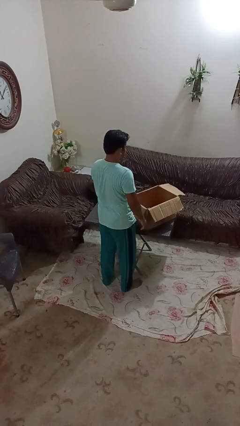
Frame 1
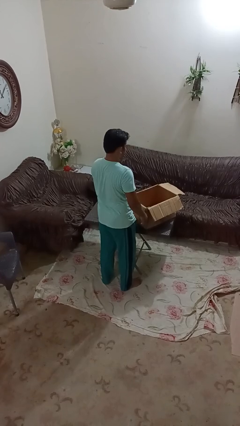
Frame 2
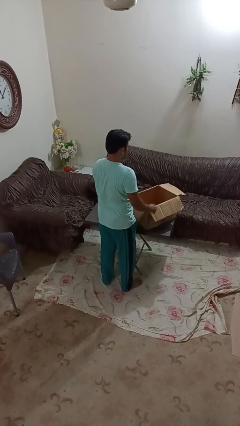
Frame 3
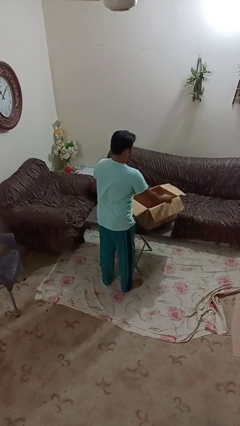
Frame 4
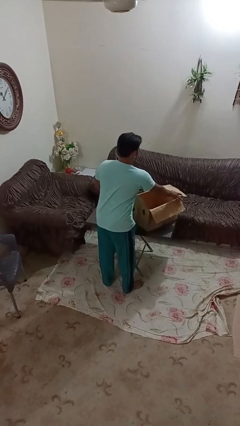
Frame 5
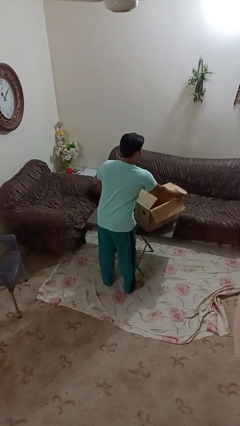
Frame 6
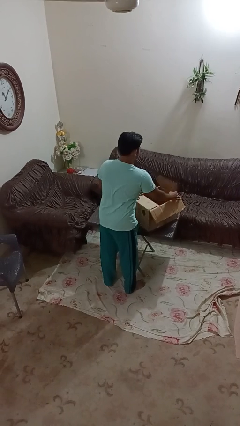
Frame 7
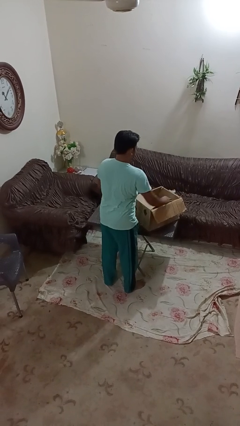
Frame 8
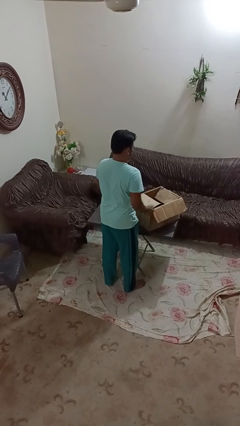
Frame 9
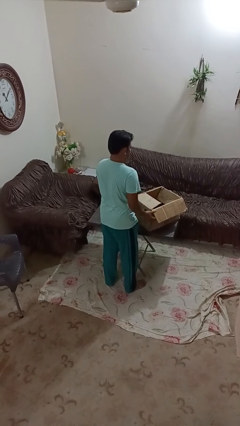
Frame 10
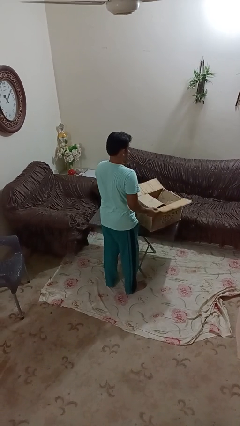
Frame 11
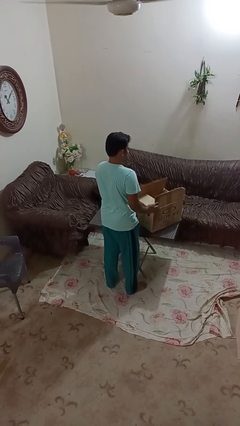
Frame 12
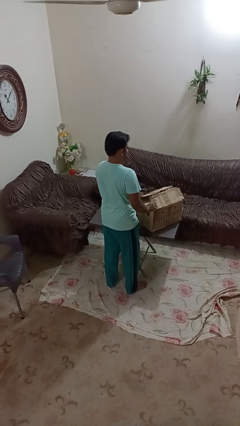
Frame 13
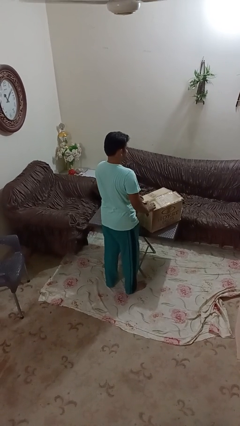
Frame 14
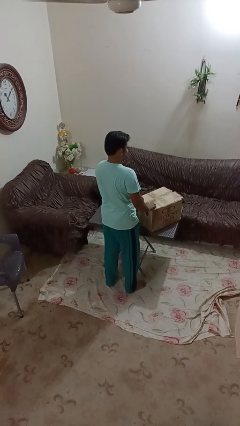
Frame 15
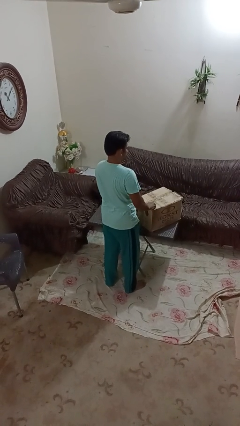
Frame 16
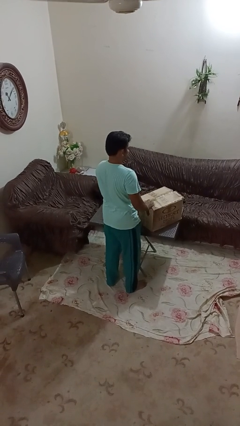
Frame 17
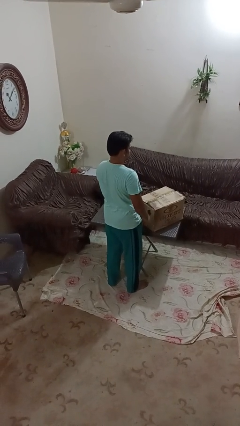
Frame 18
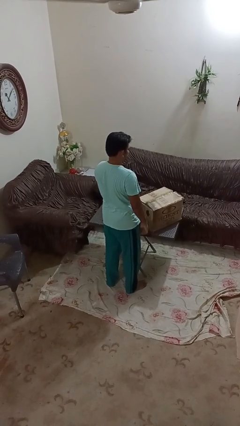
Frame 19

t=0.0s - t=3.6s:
person closes box

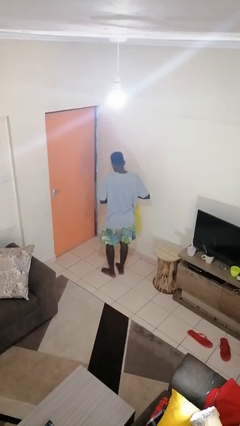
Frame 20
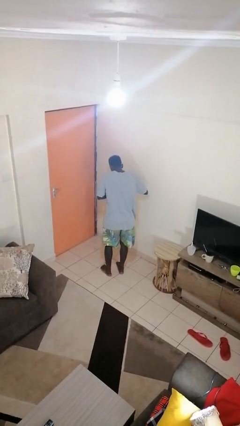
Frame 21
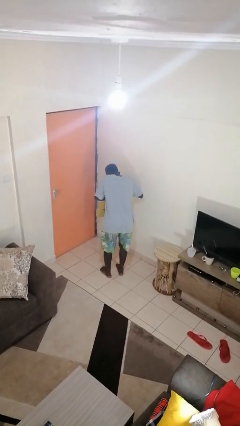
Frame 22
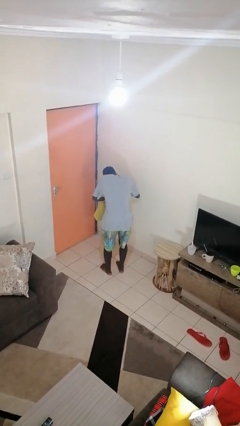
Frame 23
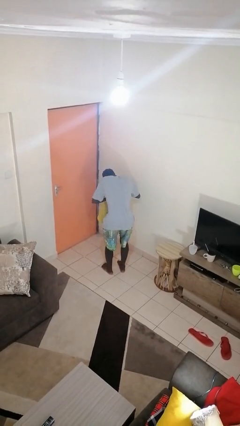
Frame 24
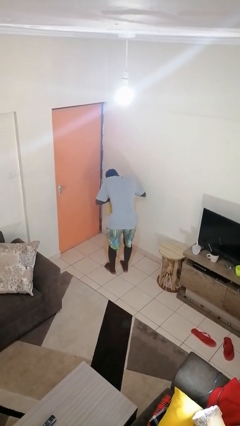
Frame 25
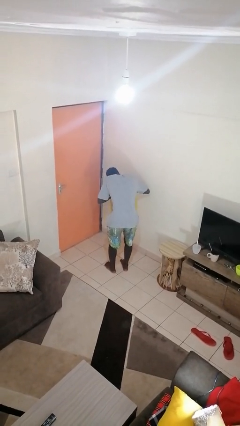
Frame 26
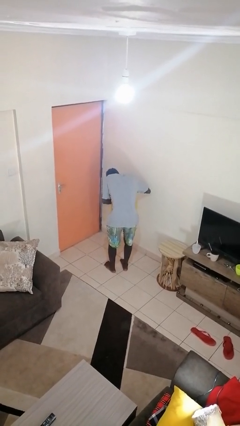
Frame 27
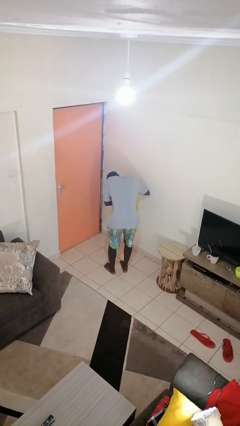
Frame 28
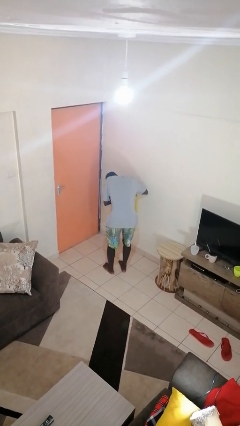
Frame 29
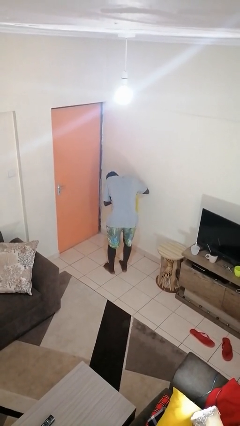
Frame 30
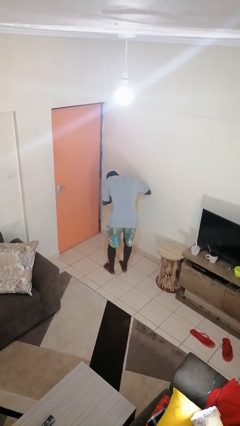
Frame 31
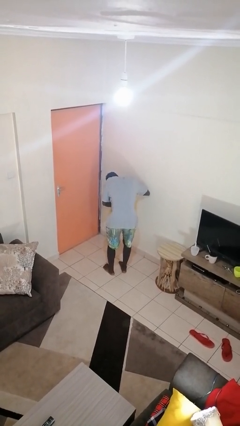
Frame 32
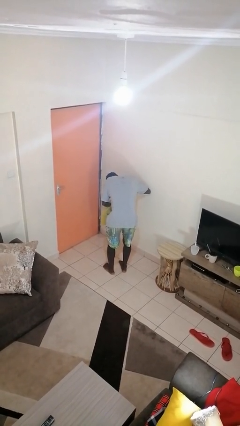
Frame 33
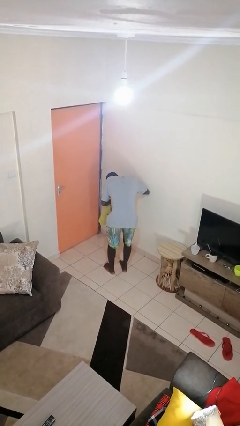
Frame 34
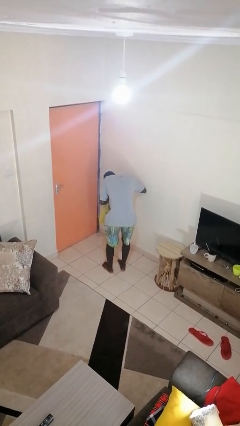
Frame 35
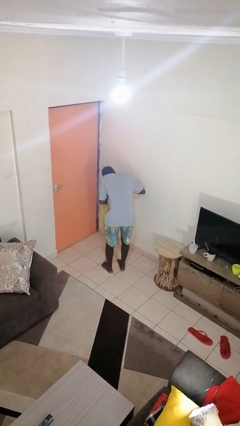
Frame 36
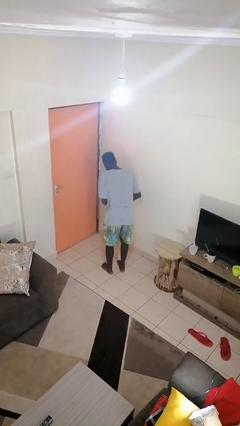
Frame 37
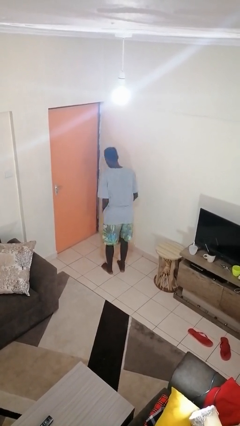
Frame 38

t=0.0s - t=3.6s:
person searches in bag

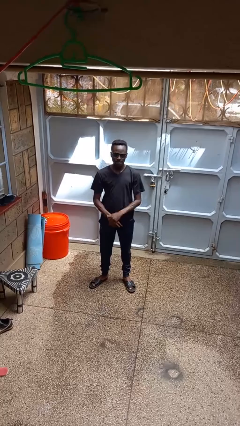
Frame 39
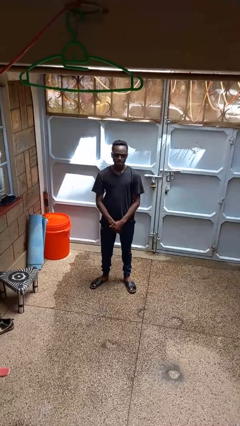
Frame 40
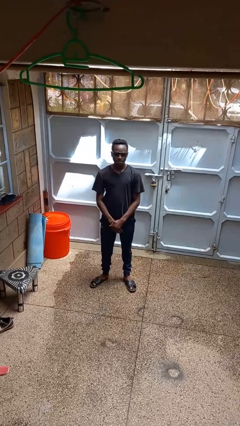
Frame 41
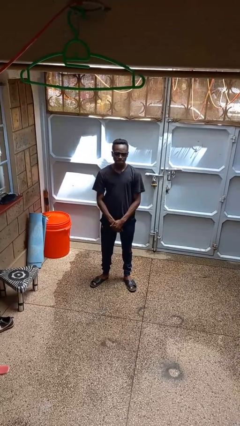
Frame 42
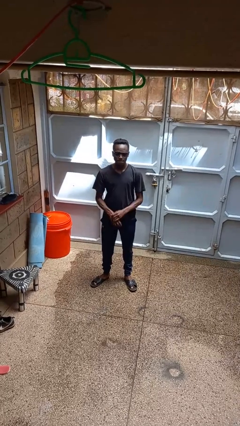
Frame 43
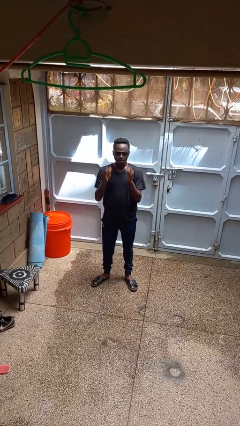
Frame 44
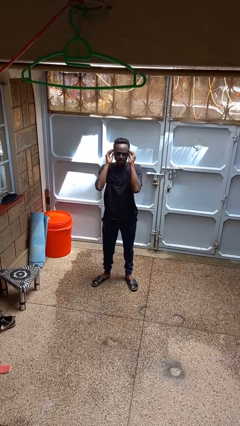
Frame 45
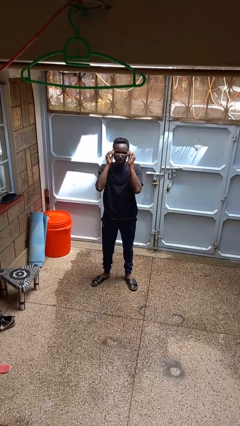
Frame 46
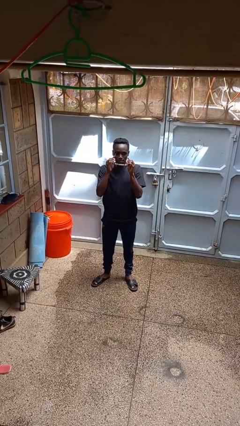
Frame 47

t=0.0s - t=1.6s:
person takes off sunglasses

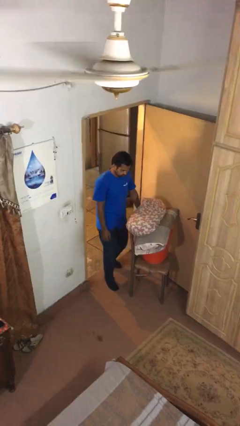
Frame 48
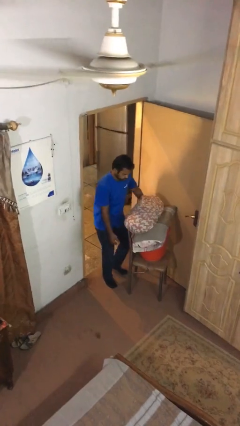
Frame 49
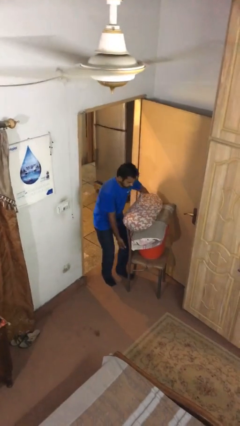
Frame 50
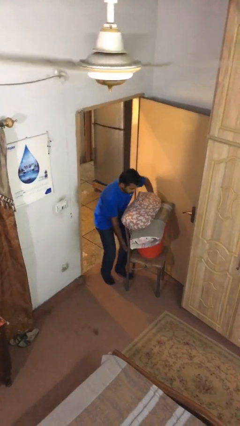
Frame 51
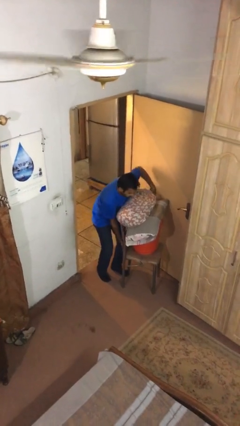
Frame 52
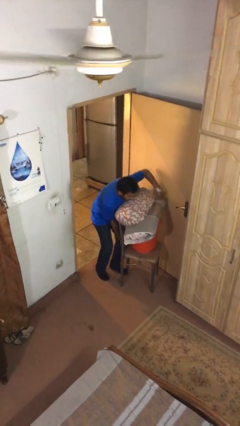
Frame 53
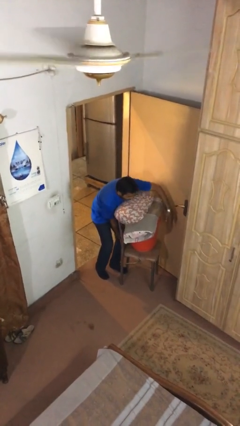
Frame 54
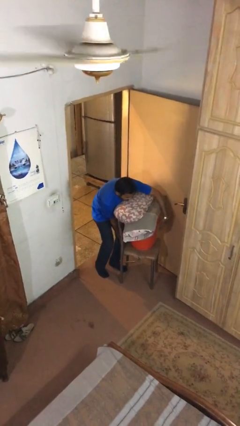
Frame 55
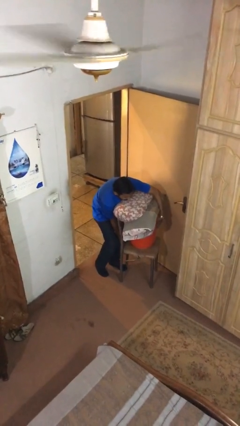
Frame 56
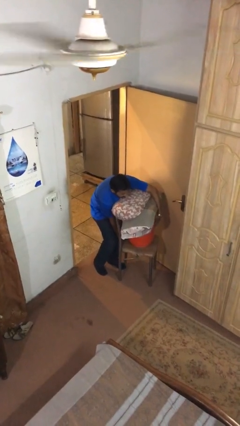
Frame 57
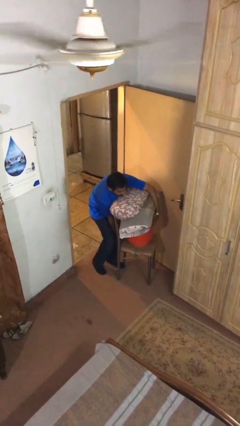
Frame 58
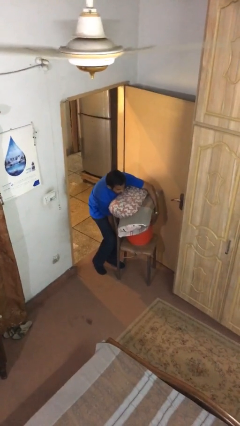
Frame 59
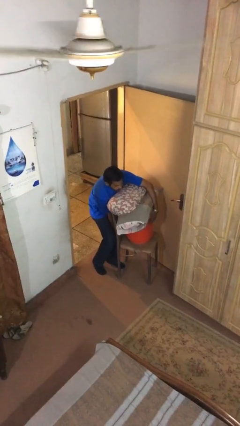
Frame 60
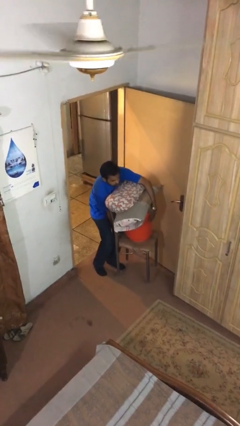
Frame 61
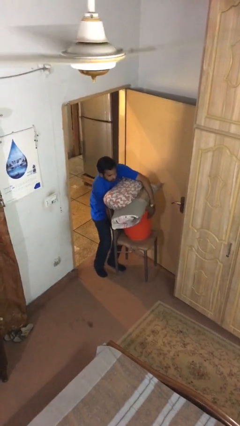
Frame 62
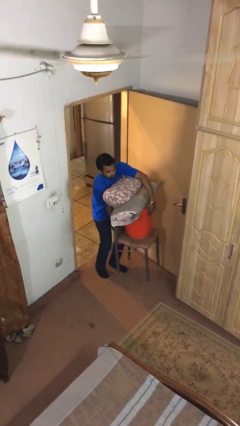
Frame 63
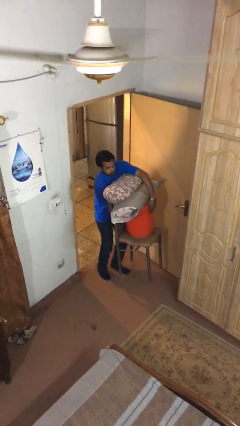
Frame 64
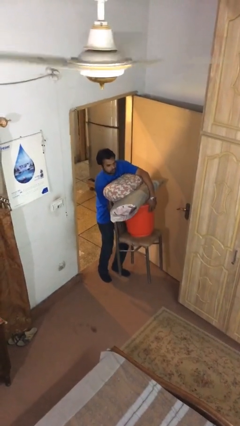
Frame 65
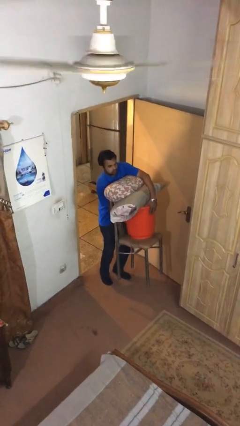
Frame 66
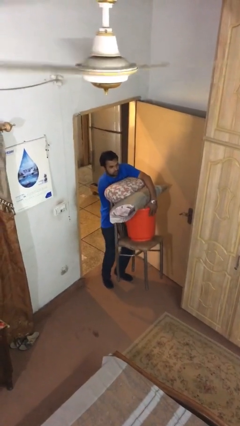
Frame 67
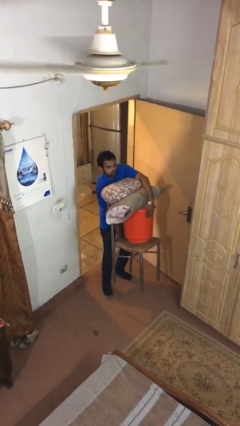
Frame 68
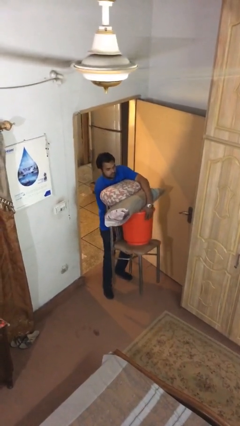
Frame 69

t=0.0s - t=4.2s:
person picks up object from floor

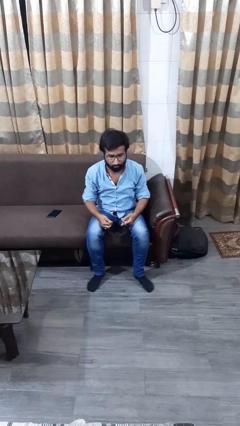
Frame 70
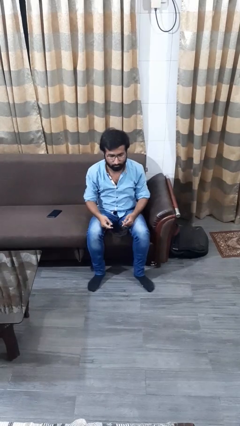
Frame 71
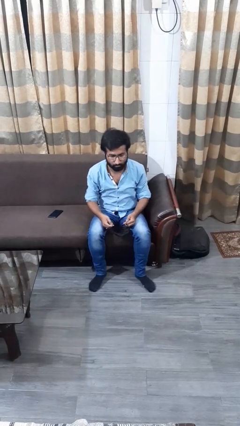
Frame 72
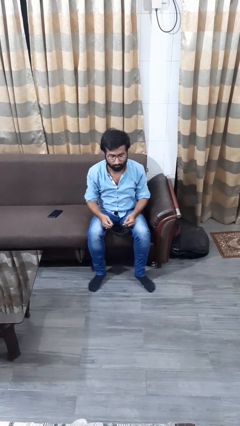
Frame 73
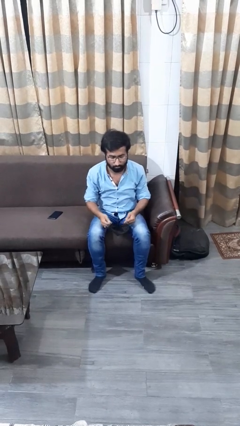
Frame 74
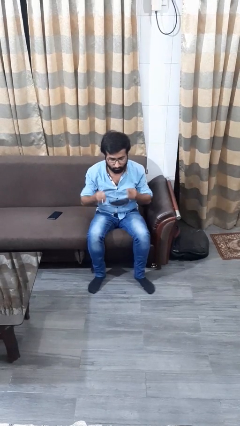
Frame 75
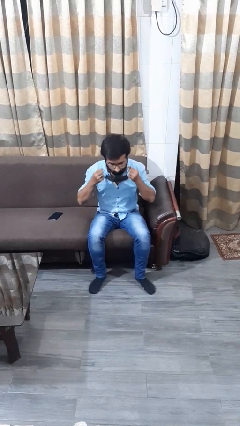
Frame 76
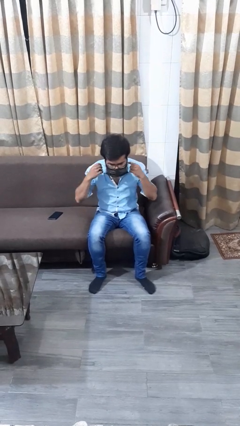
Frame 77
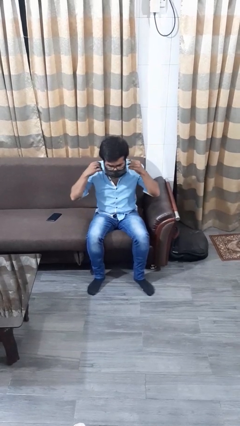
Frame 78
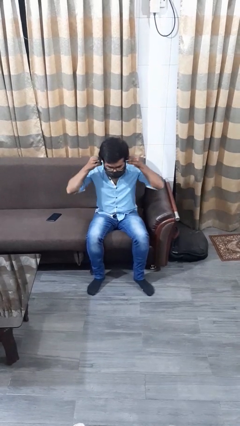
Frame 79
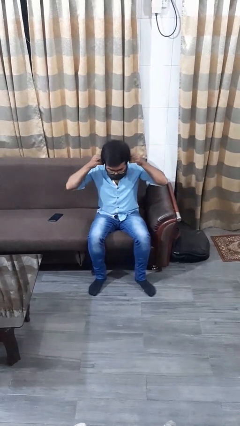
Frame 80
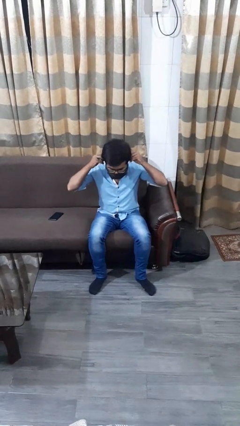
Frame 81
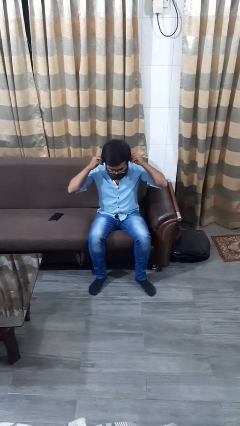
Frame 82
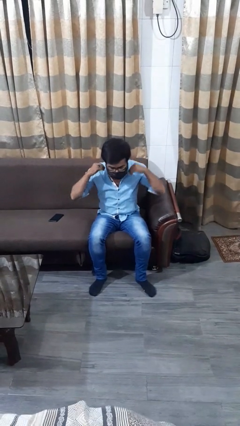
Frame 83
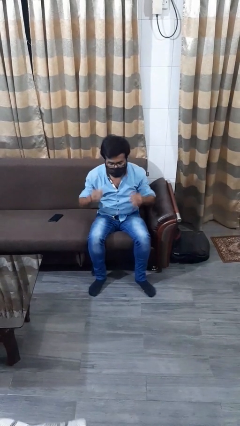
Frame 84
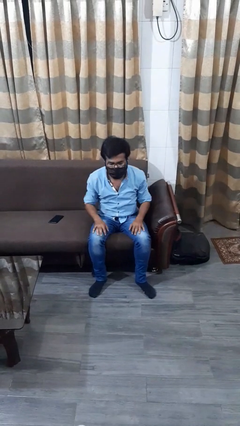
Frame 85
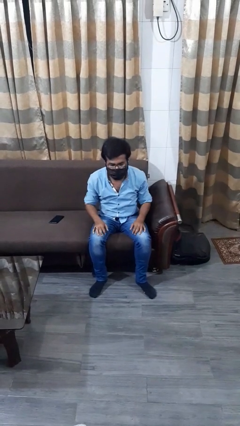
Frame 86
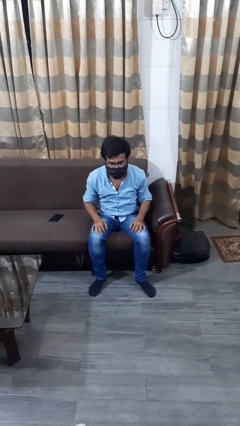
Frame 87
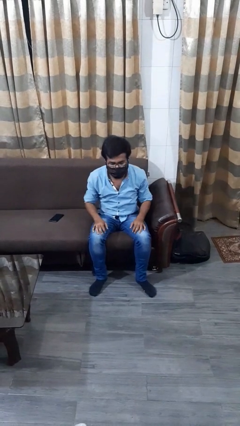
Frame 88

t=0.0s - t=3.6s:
person puts on facemask

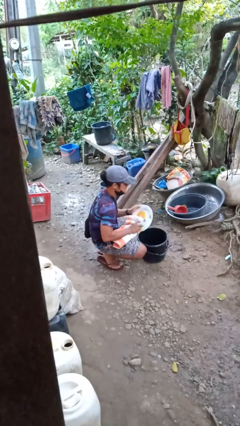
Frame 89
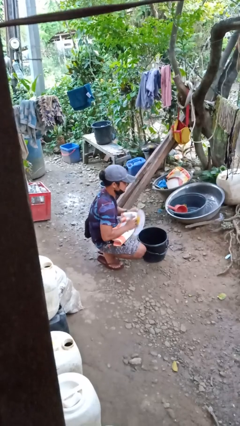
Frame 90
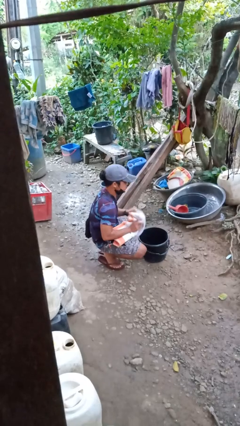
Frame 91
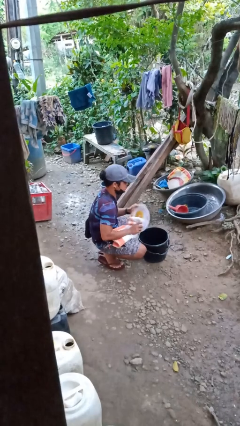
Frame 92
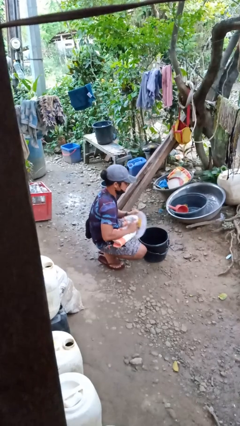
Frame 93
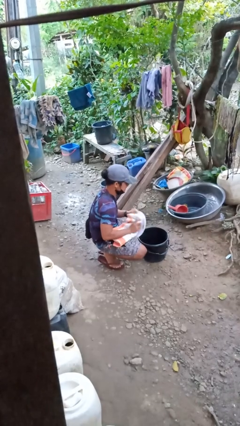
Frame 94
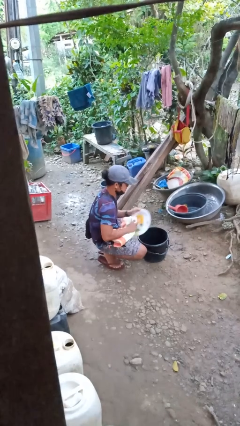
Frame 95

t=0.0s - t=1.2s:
person dries dish

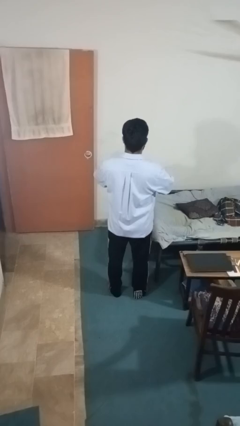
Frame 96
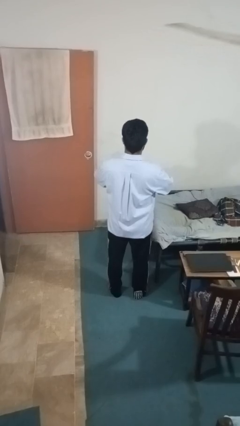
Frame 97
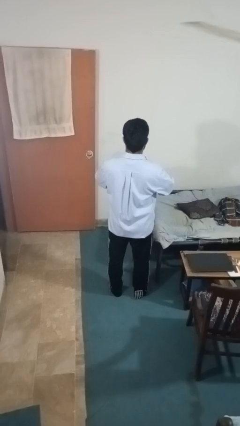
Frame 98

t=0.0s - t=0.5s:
person unbuttons shirt
